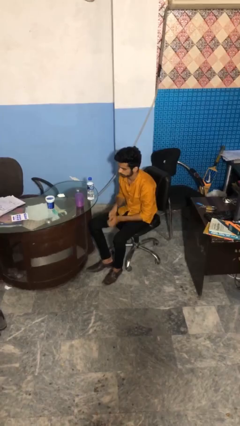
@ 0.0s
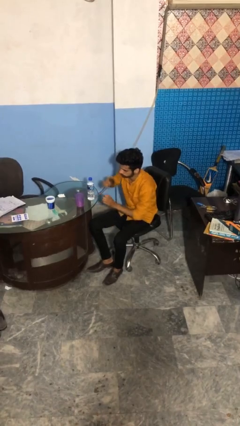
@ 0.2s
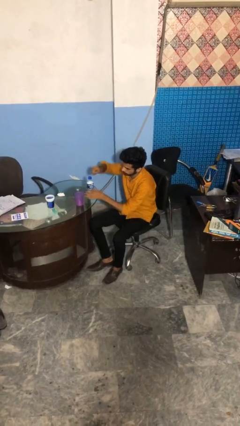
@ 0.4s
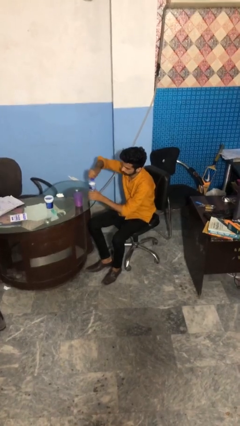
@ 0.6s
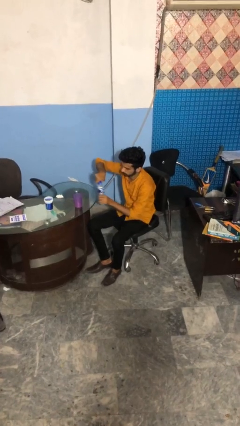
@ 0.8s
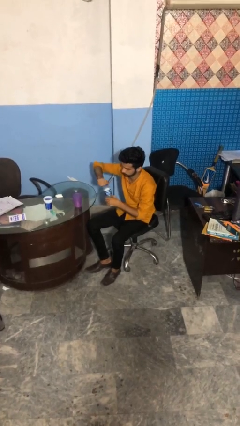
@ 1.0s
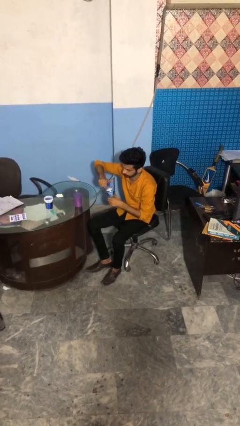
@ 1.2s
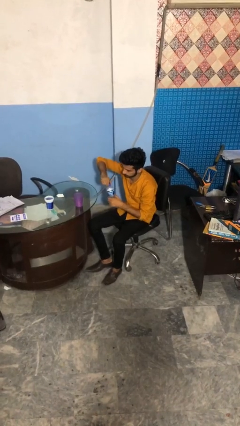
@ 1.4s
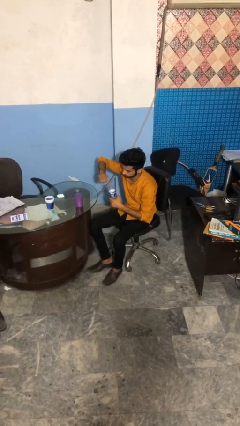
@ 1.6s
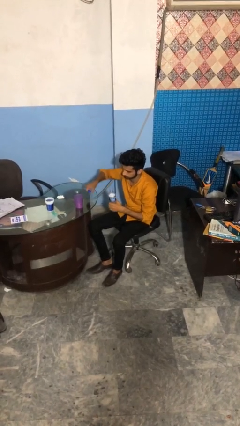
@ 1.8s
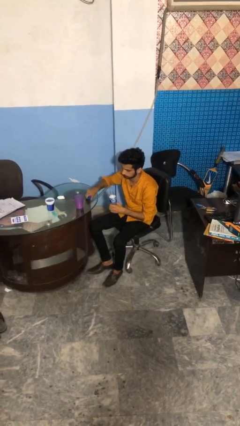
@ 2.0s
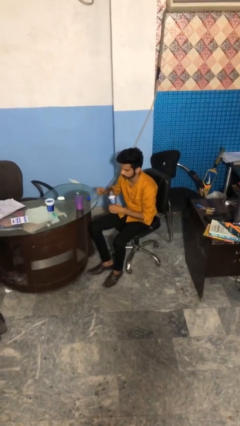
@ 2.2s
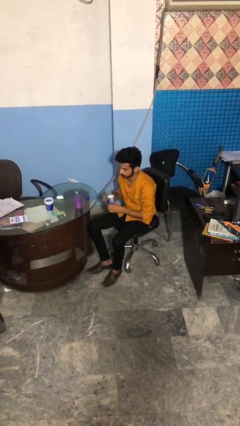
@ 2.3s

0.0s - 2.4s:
person unscrews lid from bottle

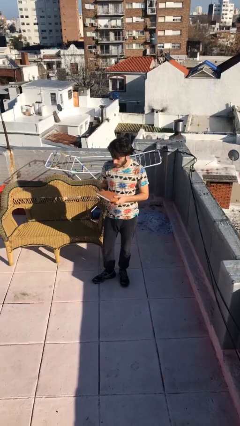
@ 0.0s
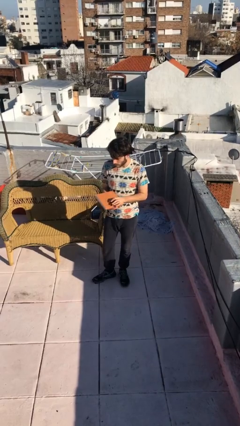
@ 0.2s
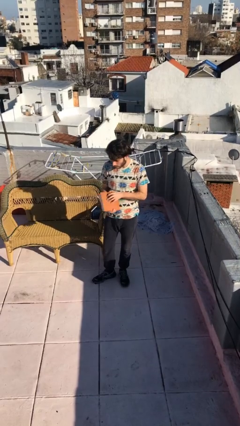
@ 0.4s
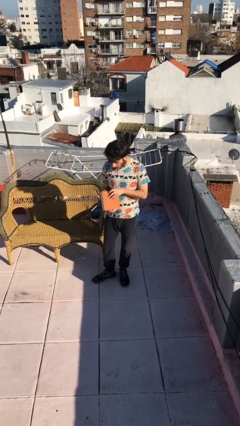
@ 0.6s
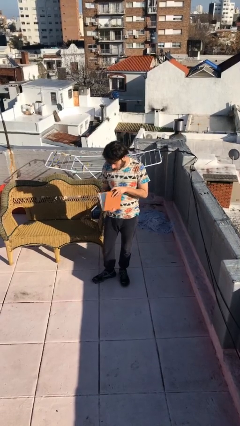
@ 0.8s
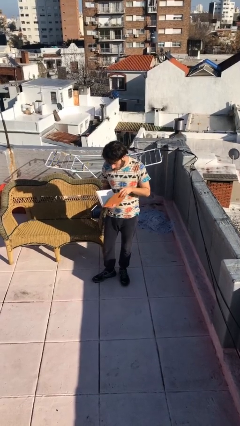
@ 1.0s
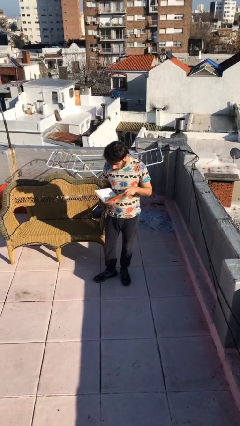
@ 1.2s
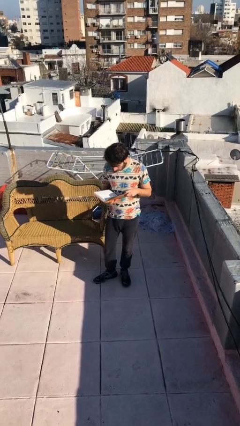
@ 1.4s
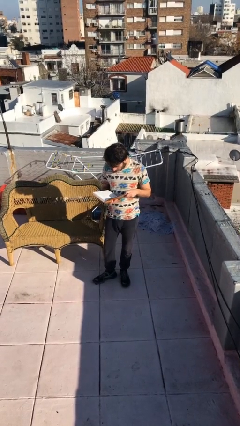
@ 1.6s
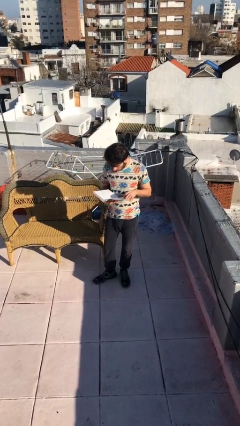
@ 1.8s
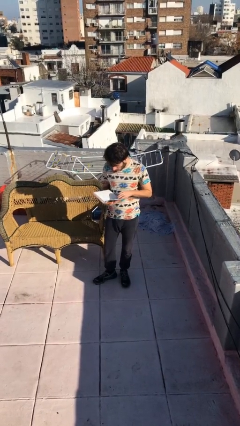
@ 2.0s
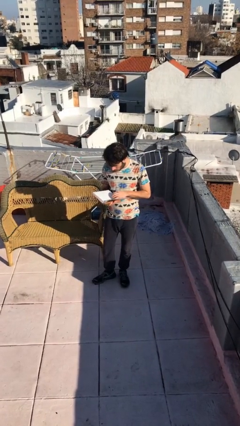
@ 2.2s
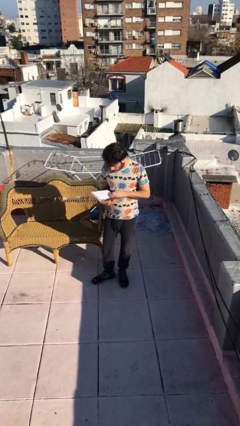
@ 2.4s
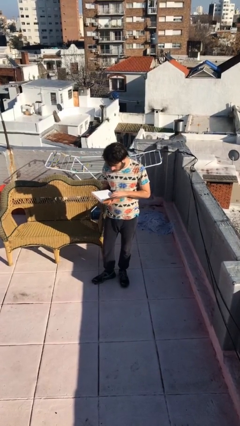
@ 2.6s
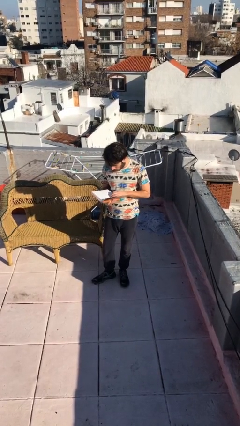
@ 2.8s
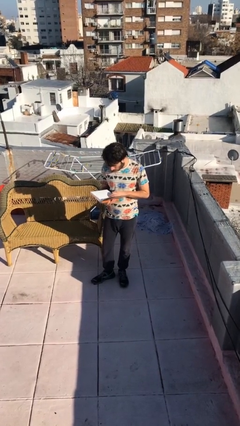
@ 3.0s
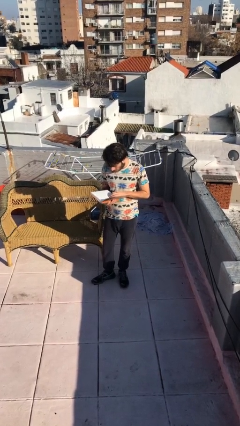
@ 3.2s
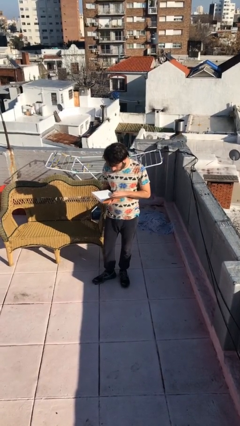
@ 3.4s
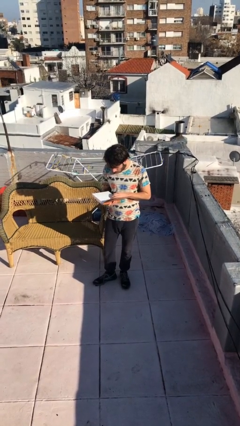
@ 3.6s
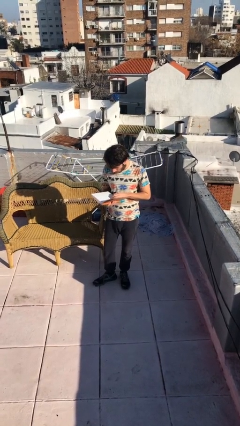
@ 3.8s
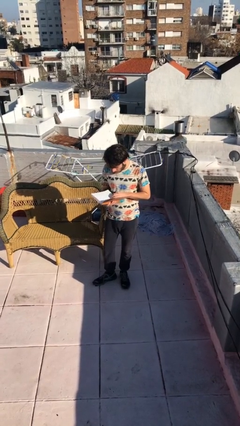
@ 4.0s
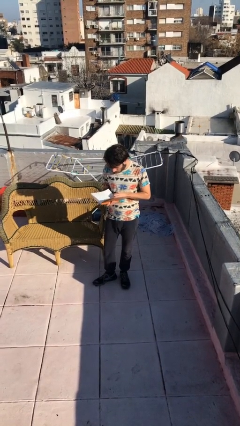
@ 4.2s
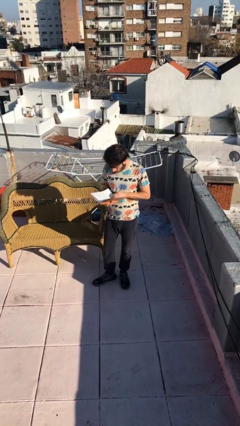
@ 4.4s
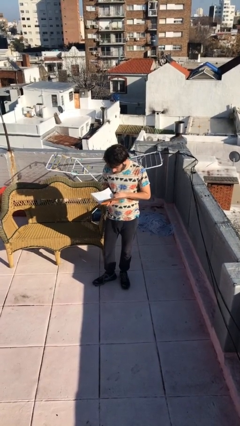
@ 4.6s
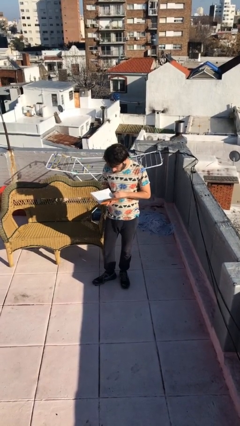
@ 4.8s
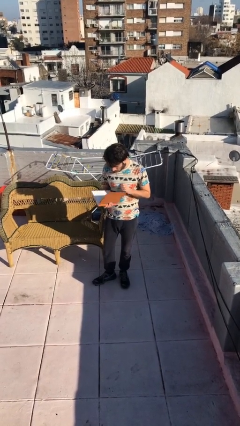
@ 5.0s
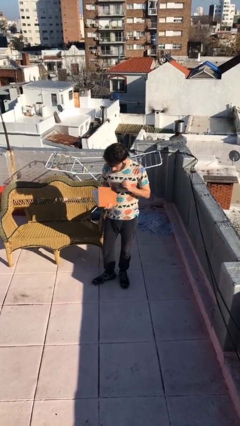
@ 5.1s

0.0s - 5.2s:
person reads book

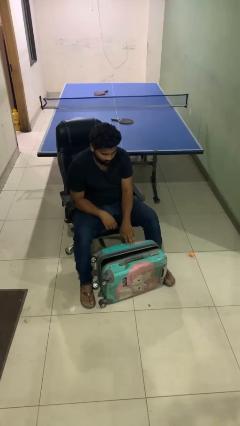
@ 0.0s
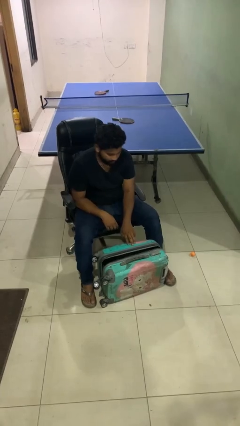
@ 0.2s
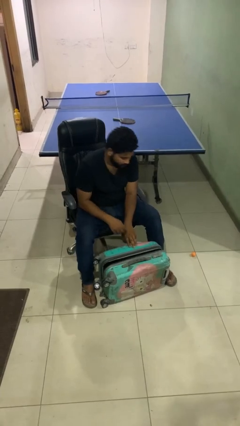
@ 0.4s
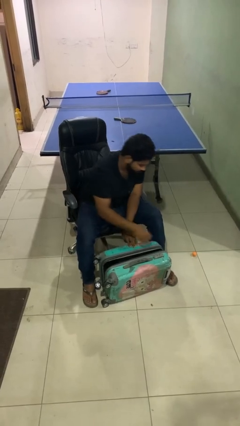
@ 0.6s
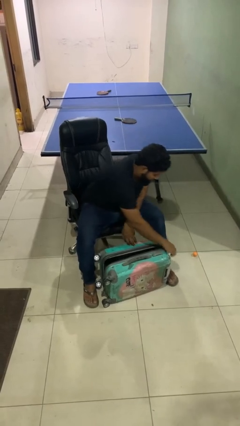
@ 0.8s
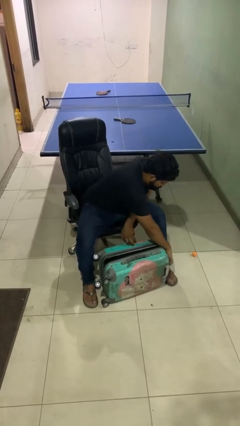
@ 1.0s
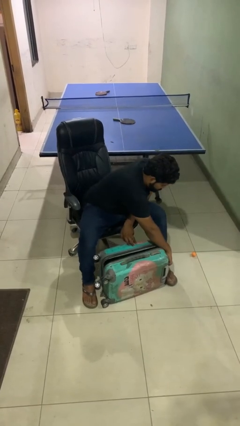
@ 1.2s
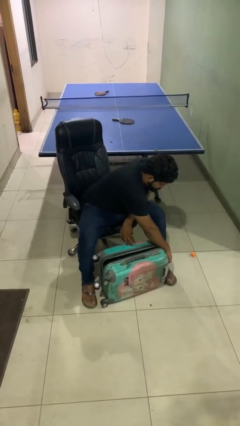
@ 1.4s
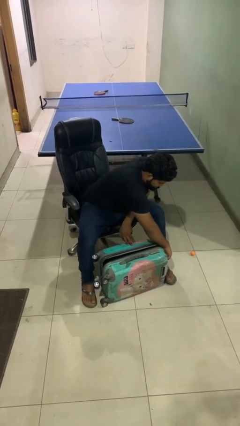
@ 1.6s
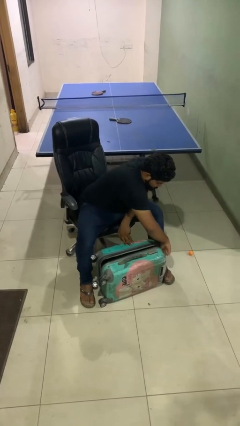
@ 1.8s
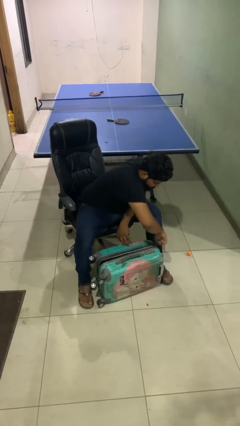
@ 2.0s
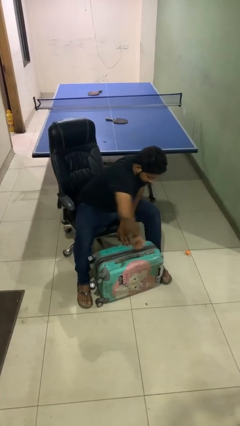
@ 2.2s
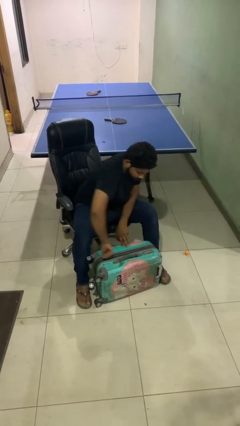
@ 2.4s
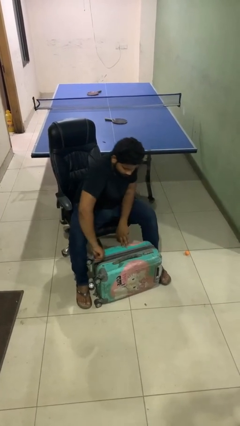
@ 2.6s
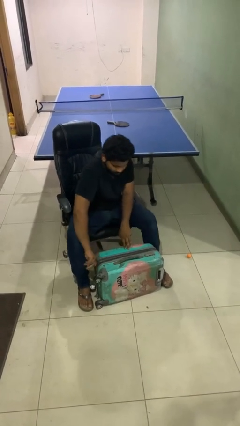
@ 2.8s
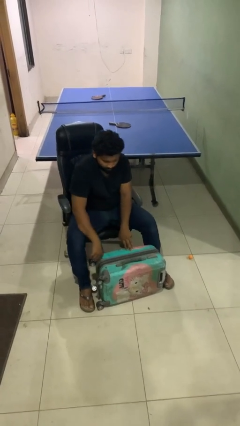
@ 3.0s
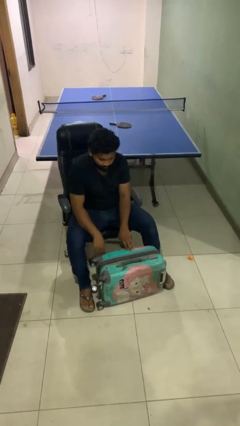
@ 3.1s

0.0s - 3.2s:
person closes suitcase

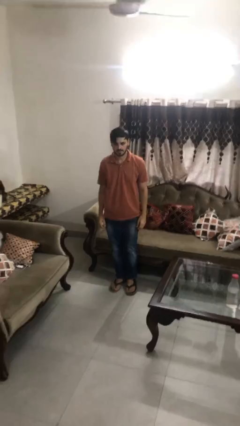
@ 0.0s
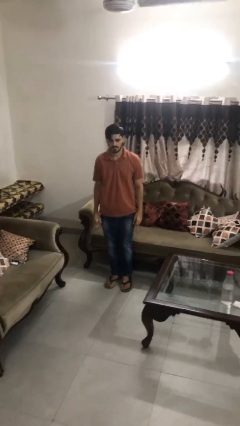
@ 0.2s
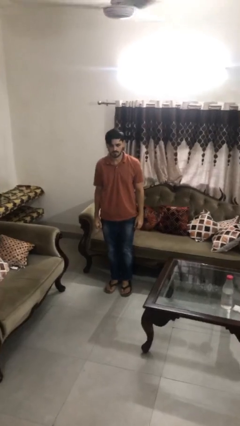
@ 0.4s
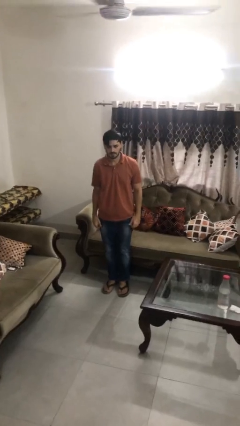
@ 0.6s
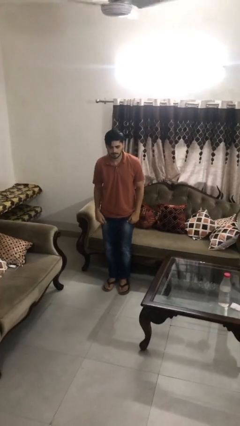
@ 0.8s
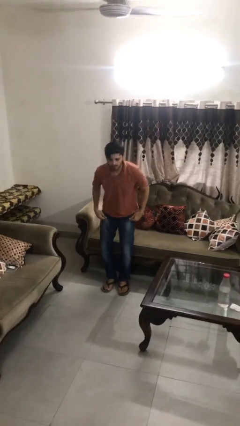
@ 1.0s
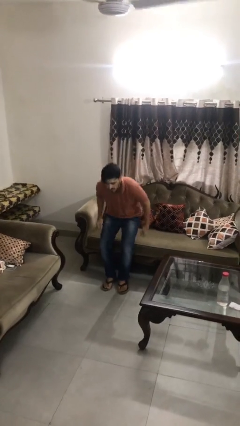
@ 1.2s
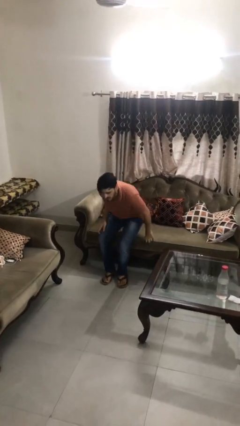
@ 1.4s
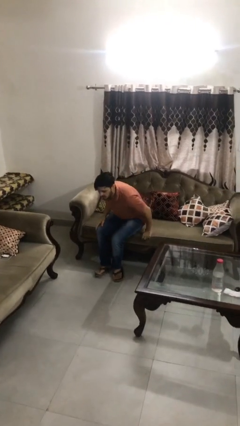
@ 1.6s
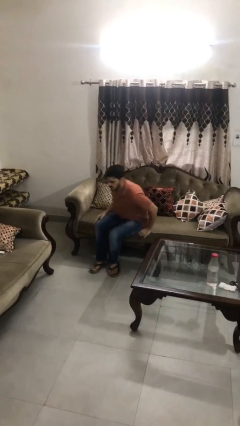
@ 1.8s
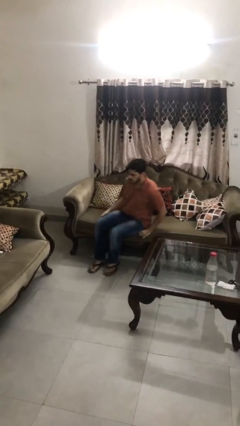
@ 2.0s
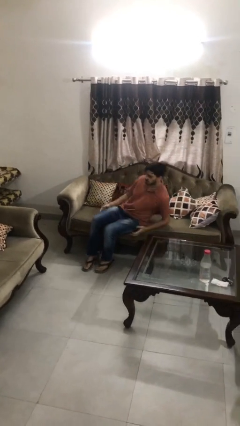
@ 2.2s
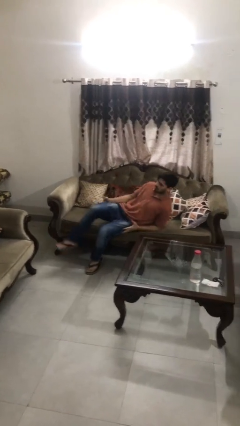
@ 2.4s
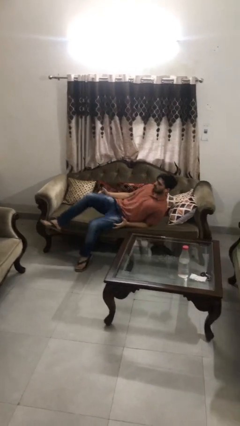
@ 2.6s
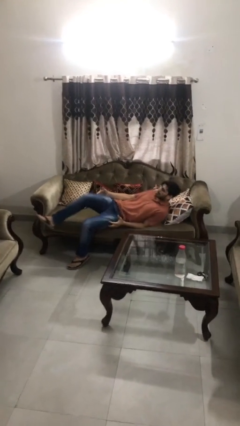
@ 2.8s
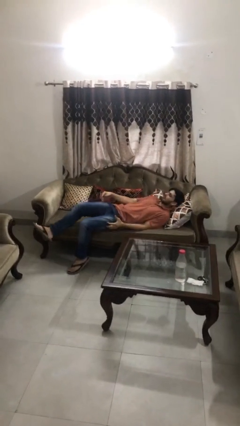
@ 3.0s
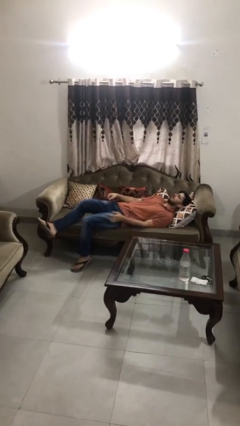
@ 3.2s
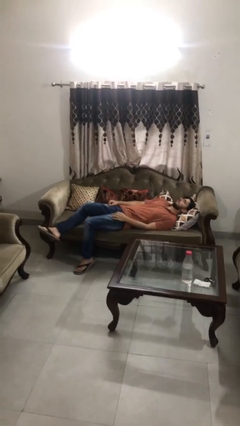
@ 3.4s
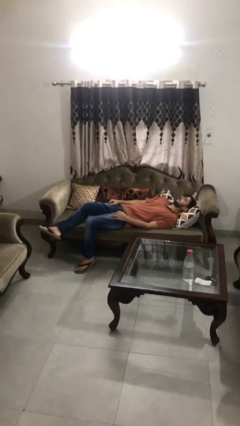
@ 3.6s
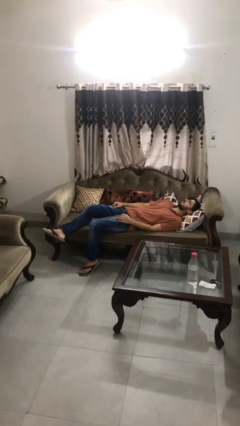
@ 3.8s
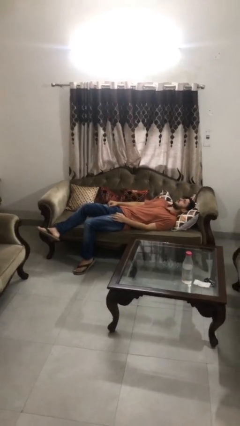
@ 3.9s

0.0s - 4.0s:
person lies down on couch

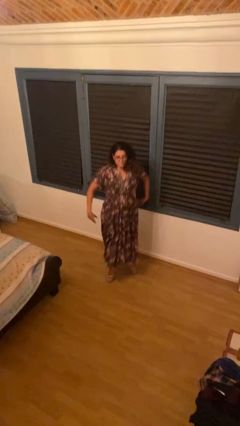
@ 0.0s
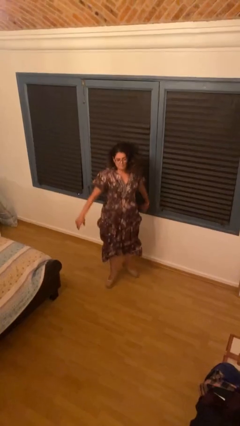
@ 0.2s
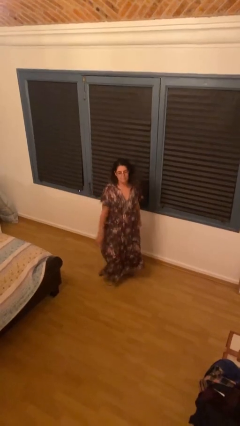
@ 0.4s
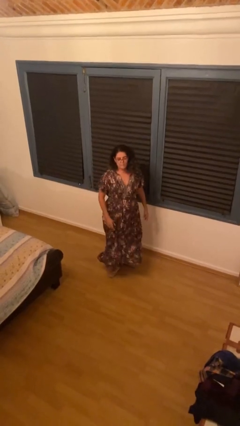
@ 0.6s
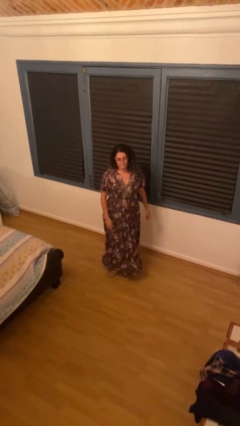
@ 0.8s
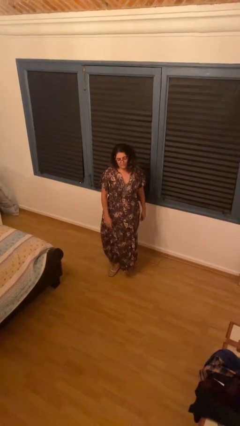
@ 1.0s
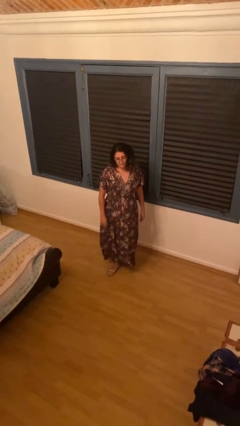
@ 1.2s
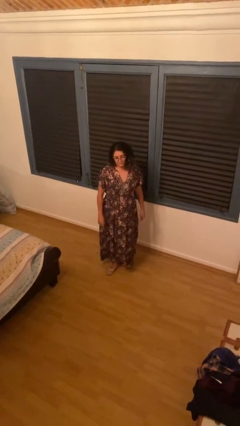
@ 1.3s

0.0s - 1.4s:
person jumps

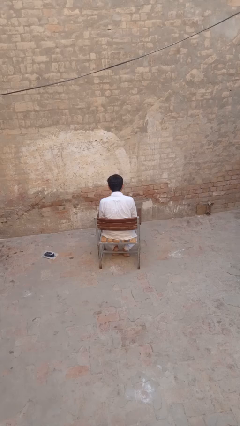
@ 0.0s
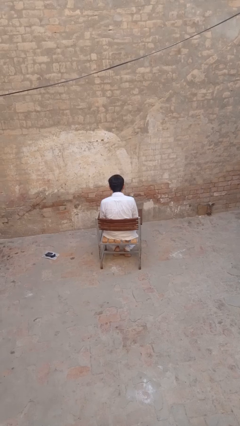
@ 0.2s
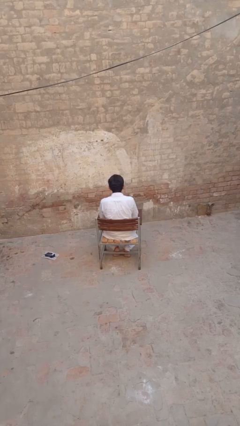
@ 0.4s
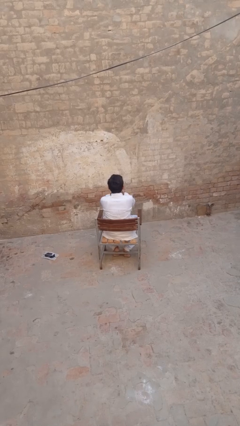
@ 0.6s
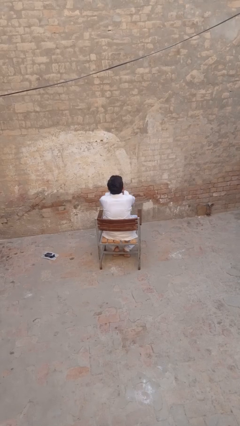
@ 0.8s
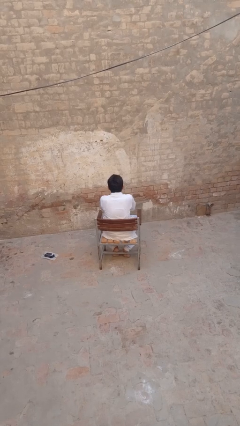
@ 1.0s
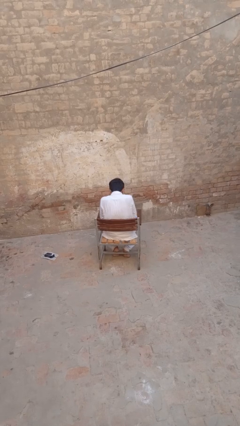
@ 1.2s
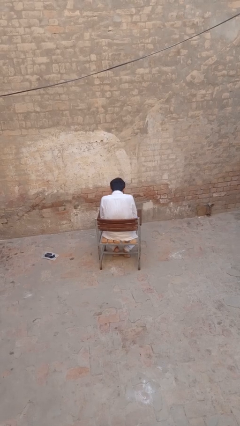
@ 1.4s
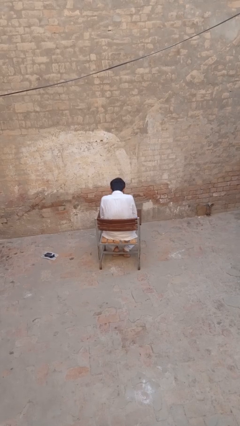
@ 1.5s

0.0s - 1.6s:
person sneezes into hand
